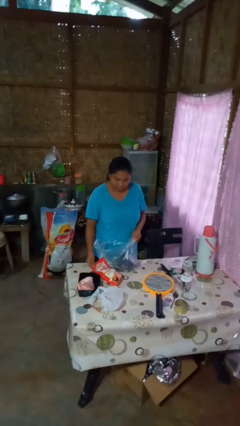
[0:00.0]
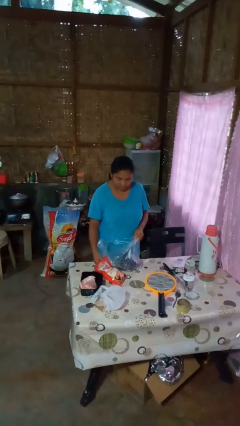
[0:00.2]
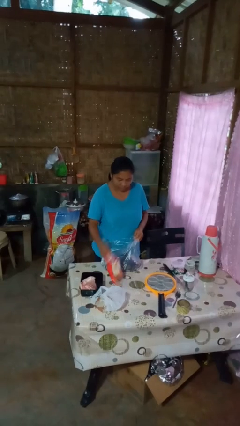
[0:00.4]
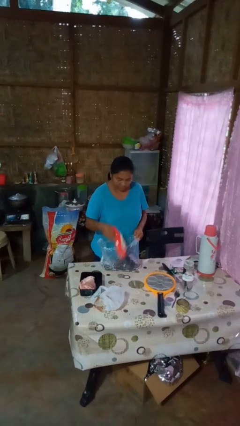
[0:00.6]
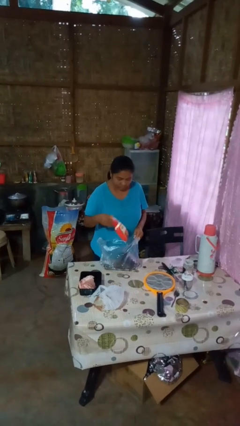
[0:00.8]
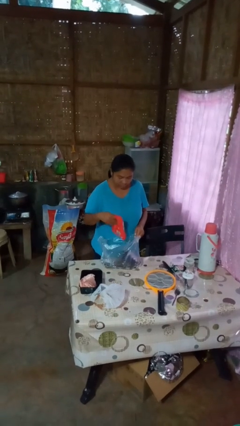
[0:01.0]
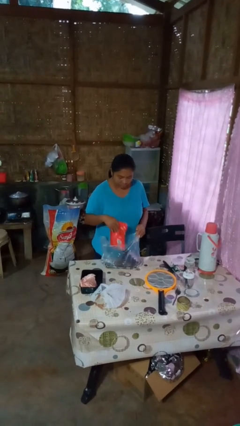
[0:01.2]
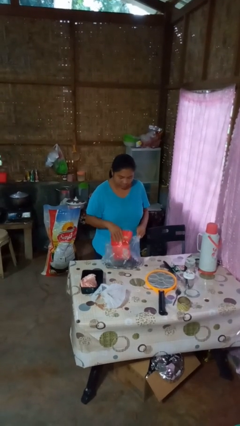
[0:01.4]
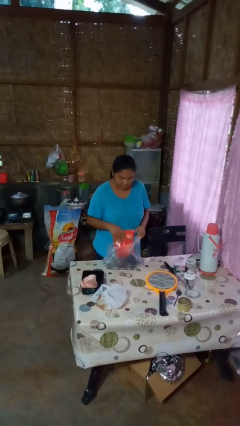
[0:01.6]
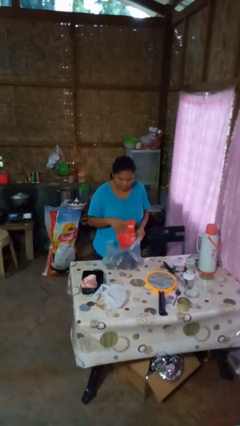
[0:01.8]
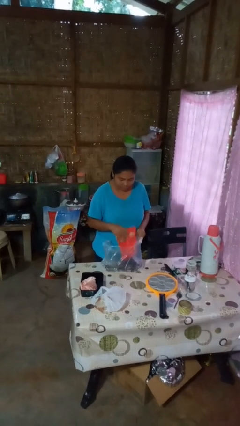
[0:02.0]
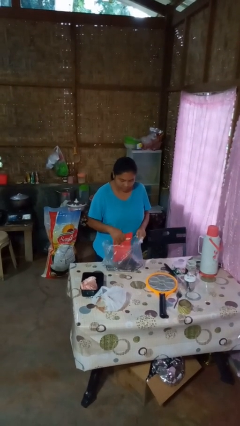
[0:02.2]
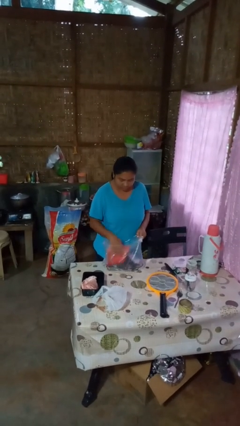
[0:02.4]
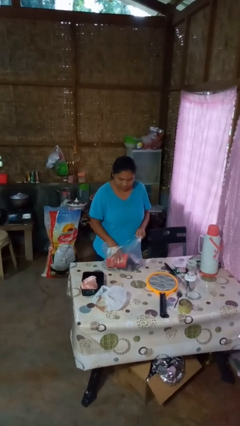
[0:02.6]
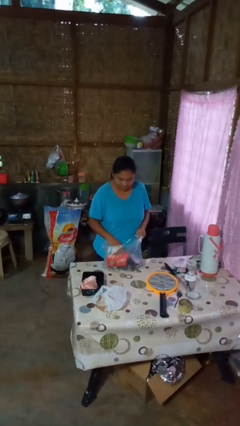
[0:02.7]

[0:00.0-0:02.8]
person puts object into bag

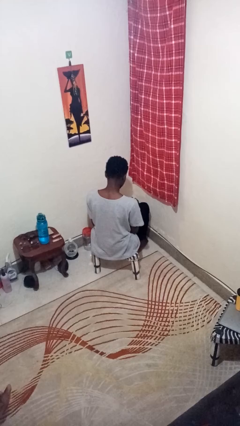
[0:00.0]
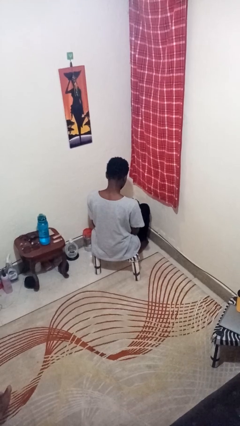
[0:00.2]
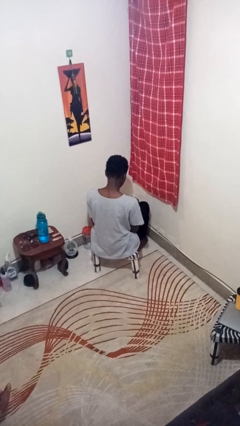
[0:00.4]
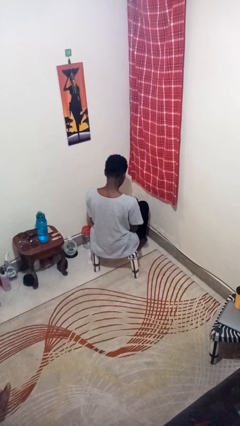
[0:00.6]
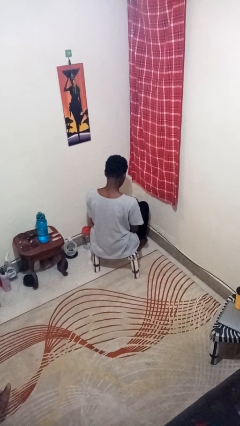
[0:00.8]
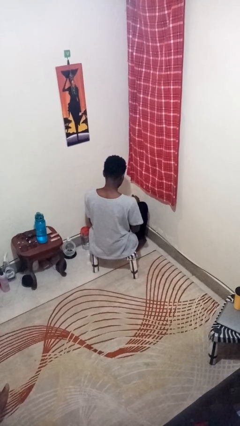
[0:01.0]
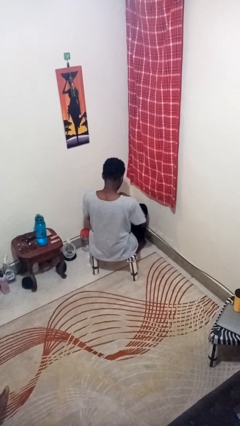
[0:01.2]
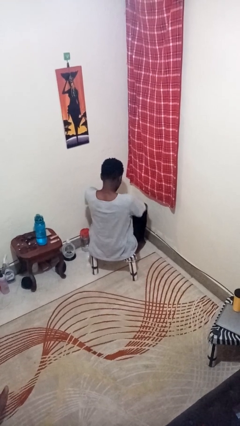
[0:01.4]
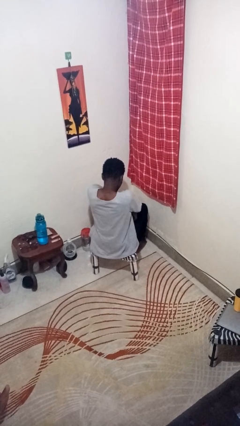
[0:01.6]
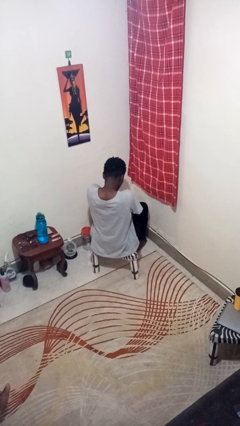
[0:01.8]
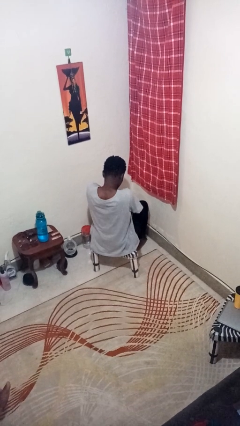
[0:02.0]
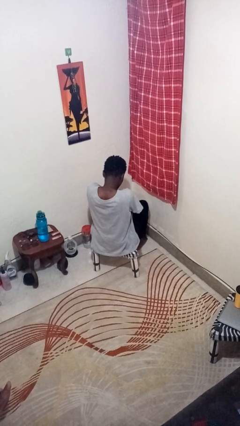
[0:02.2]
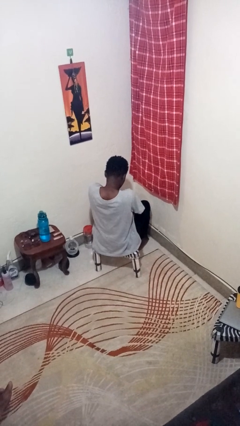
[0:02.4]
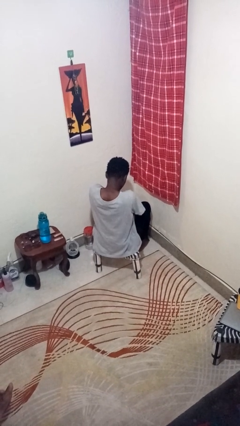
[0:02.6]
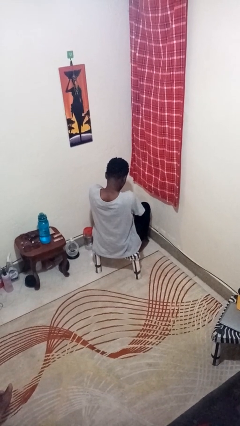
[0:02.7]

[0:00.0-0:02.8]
person crosses arms

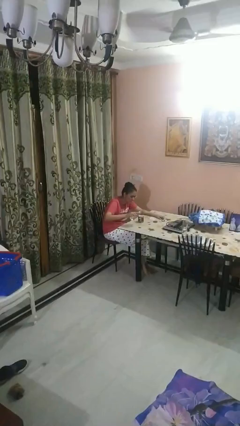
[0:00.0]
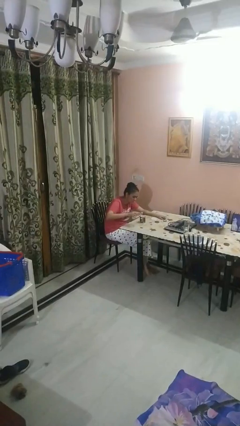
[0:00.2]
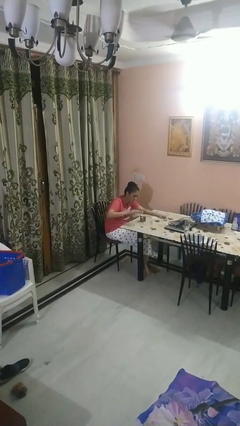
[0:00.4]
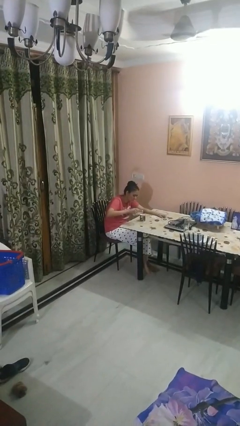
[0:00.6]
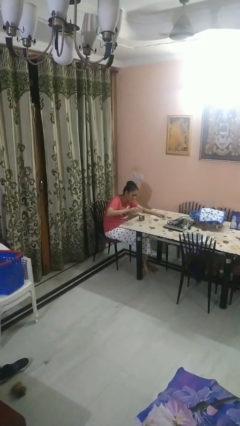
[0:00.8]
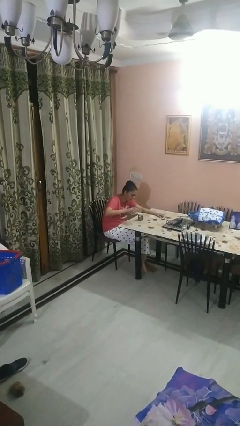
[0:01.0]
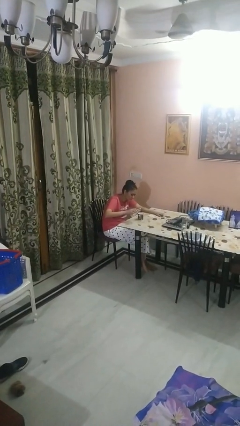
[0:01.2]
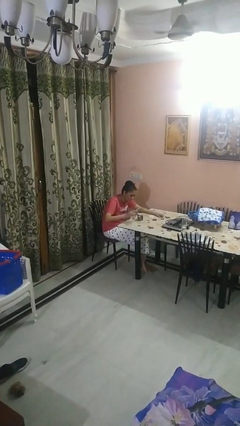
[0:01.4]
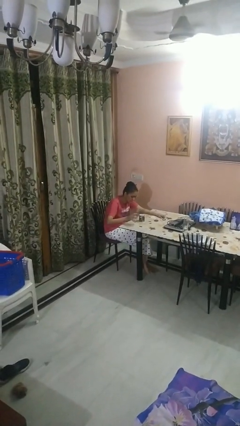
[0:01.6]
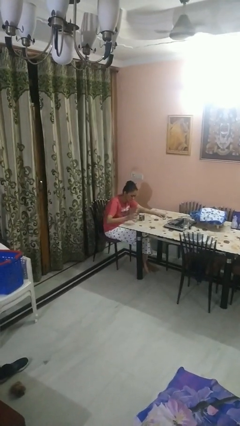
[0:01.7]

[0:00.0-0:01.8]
person pours liquid into cup

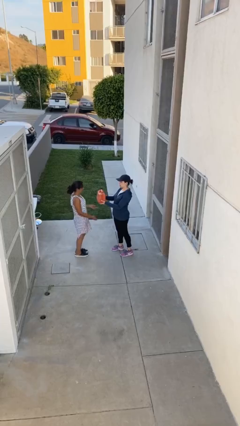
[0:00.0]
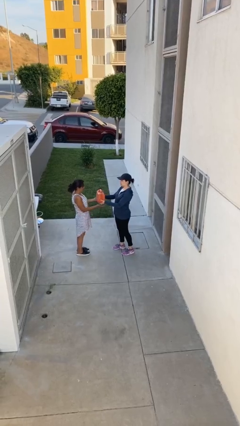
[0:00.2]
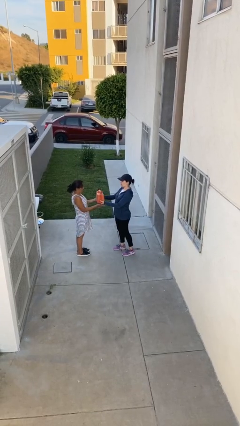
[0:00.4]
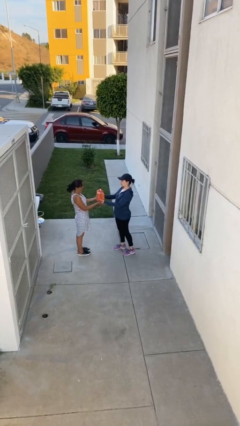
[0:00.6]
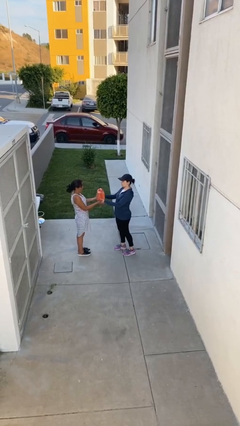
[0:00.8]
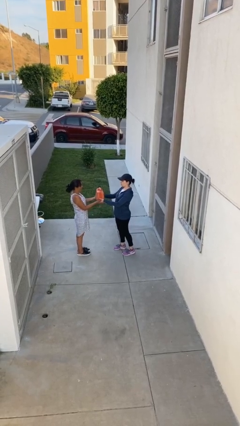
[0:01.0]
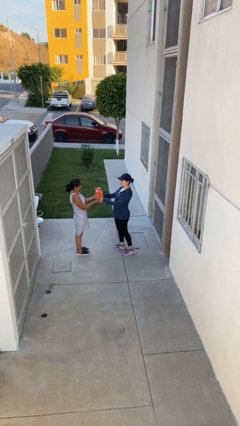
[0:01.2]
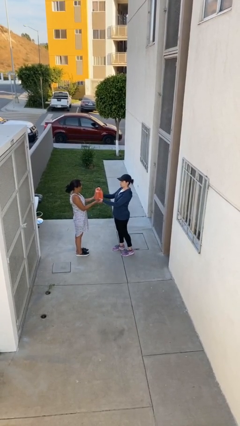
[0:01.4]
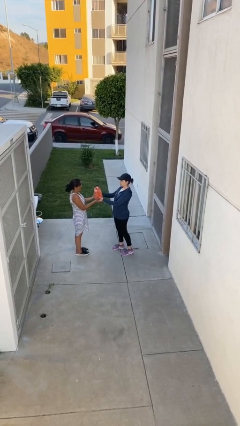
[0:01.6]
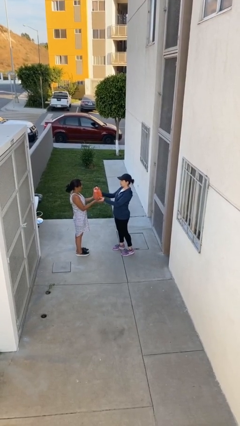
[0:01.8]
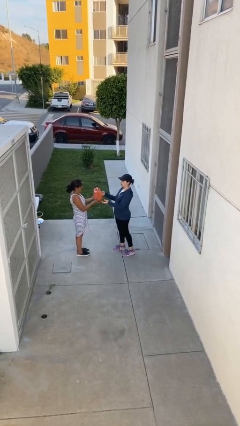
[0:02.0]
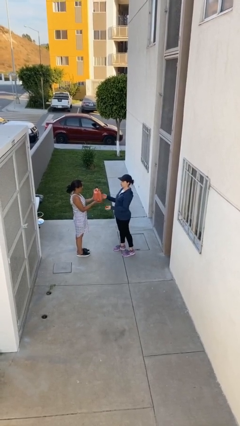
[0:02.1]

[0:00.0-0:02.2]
person transfers object to person

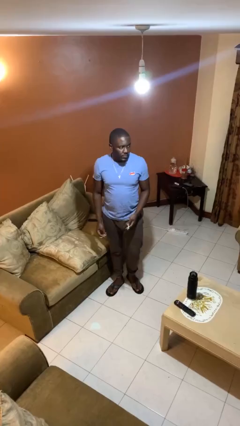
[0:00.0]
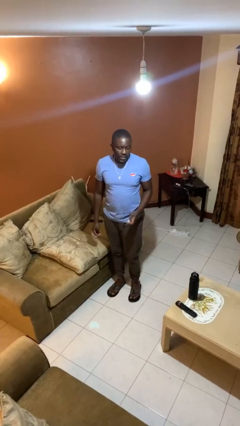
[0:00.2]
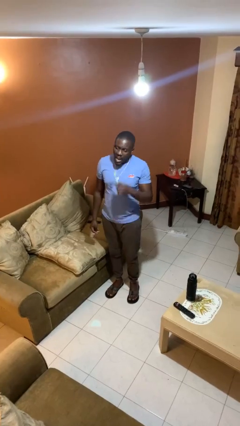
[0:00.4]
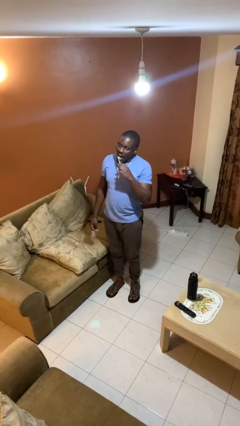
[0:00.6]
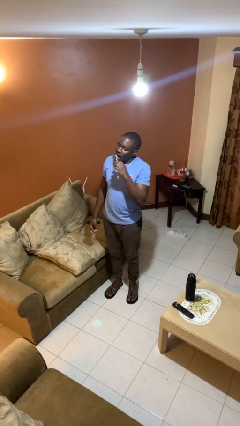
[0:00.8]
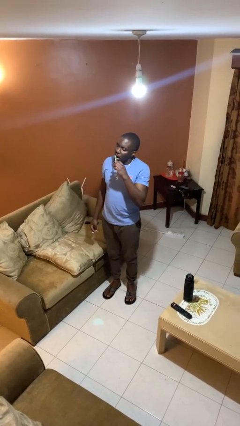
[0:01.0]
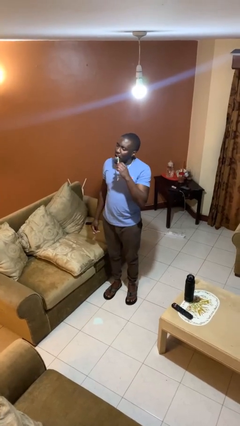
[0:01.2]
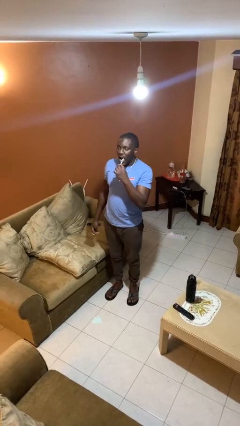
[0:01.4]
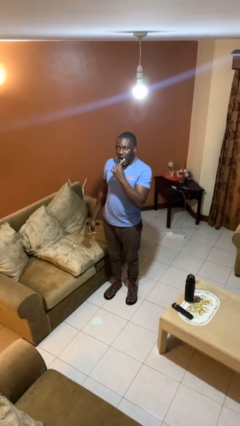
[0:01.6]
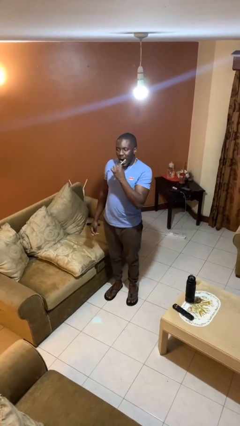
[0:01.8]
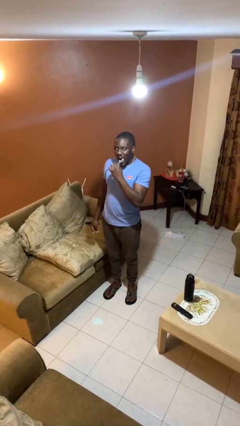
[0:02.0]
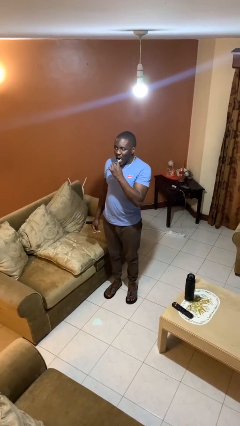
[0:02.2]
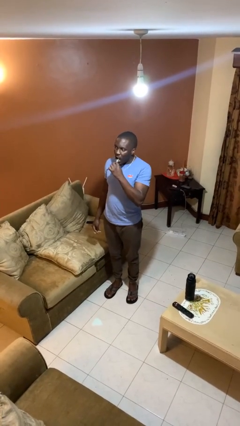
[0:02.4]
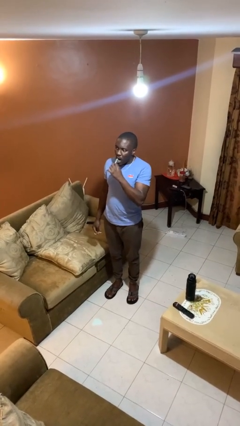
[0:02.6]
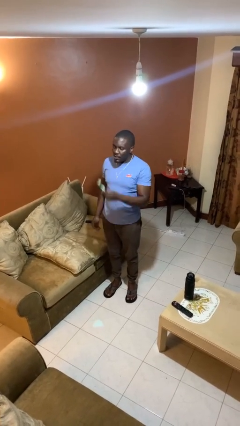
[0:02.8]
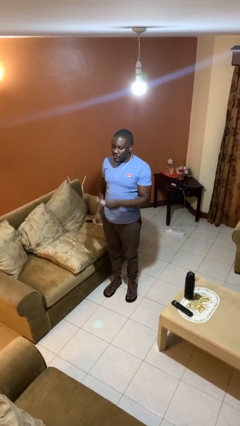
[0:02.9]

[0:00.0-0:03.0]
person brushes teeth

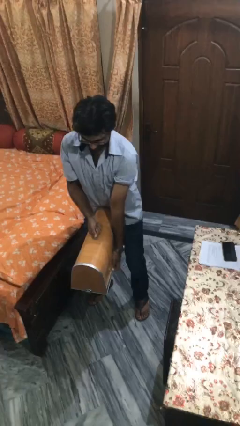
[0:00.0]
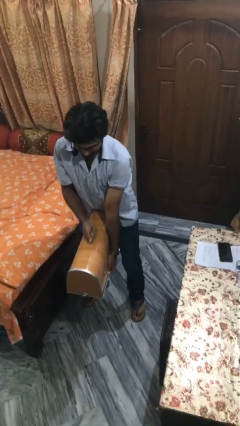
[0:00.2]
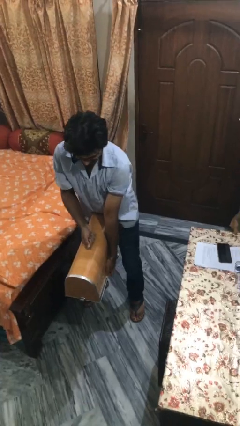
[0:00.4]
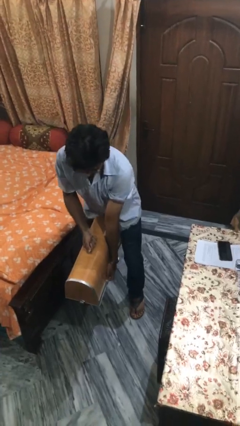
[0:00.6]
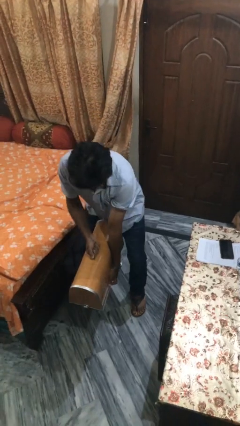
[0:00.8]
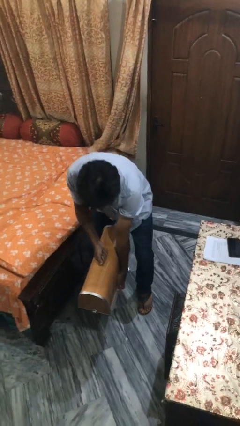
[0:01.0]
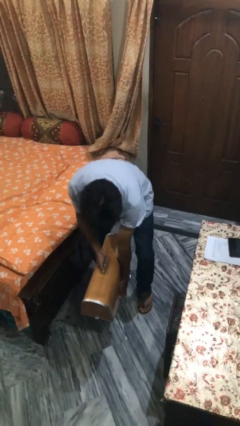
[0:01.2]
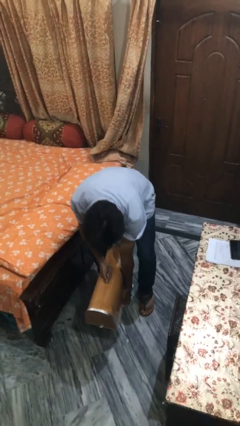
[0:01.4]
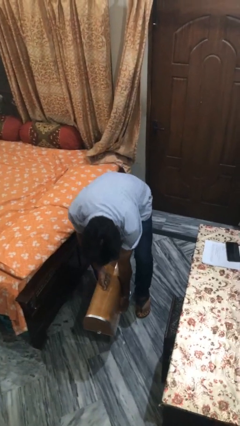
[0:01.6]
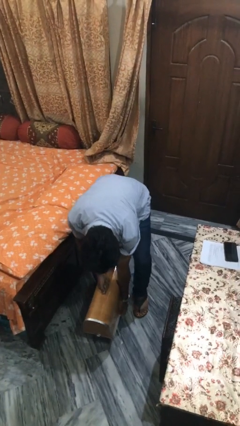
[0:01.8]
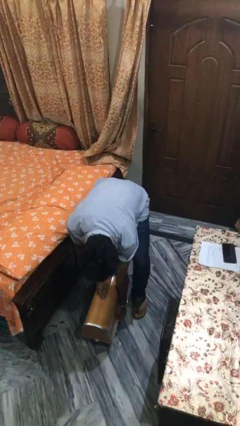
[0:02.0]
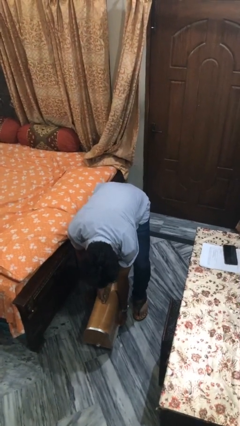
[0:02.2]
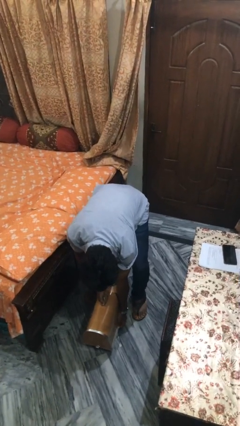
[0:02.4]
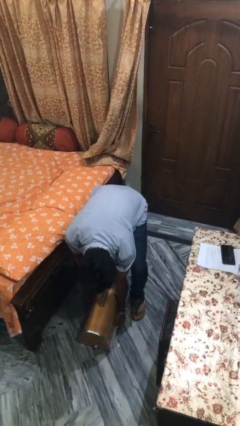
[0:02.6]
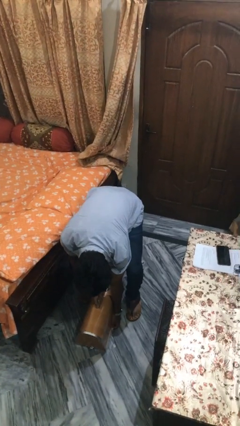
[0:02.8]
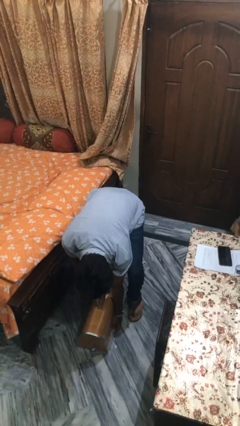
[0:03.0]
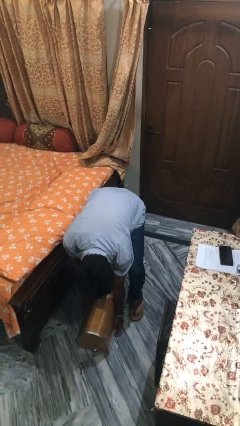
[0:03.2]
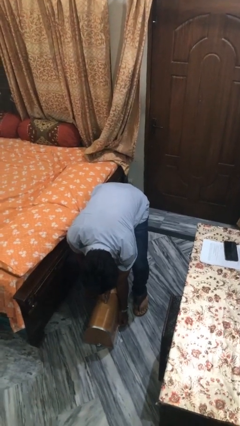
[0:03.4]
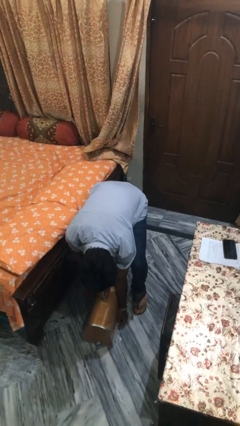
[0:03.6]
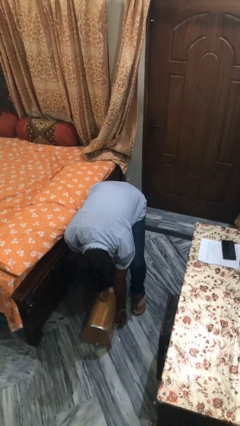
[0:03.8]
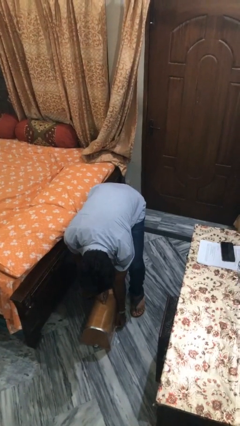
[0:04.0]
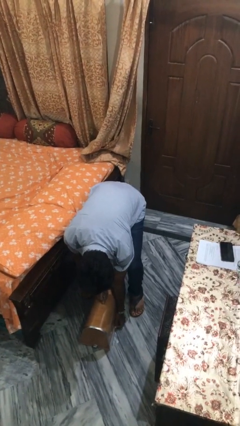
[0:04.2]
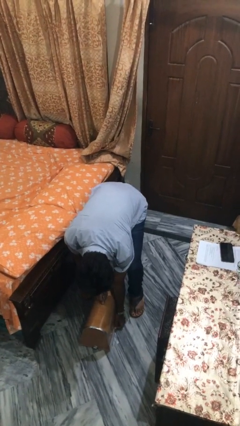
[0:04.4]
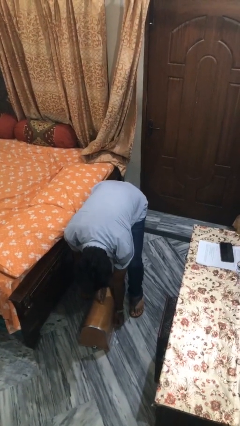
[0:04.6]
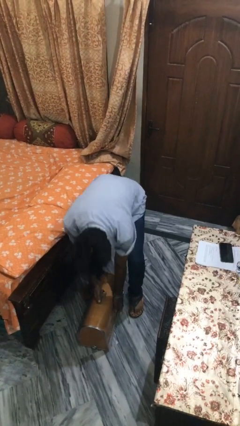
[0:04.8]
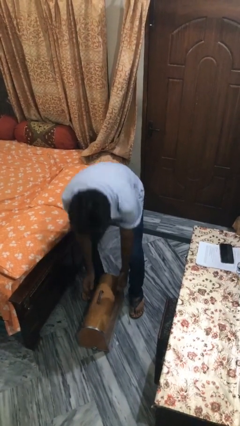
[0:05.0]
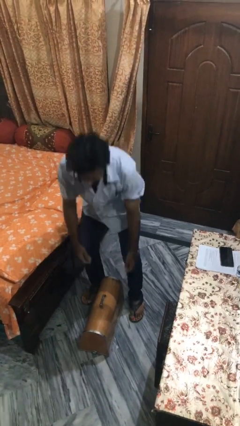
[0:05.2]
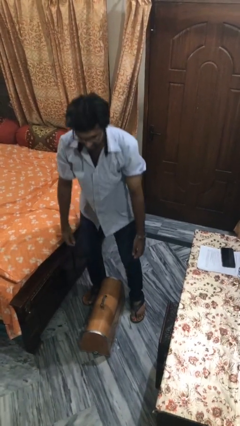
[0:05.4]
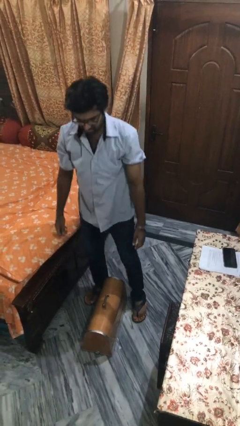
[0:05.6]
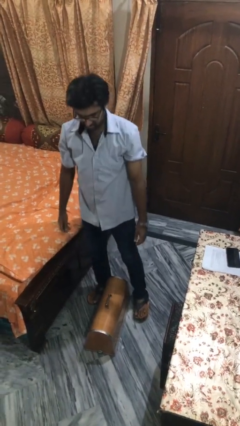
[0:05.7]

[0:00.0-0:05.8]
person puts down object on floor
